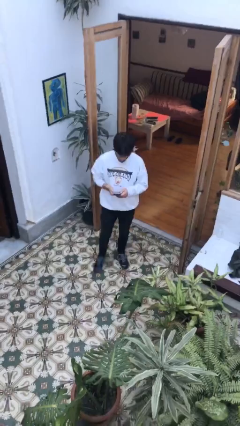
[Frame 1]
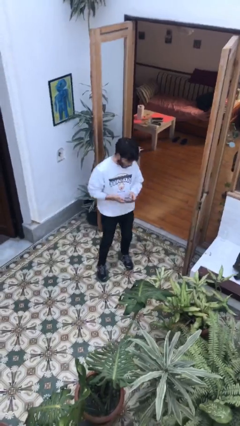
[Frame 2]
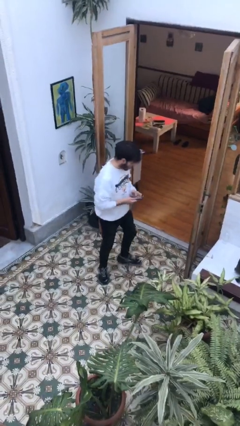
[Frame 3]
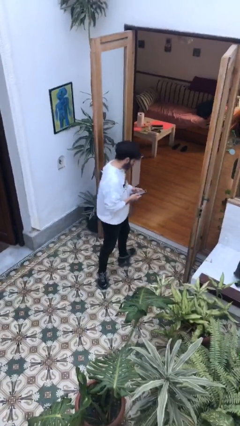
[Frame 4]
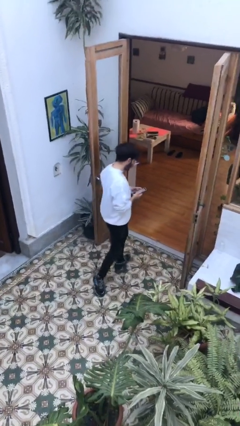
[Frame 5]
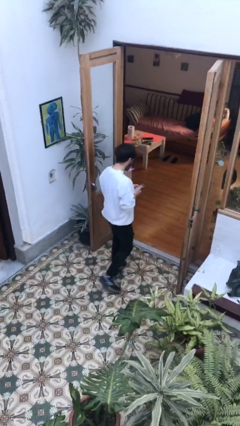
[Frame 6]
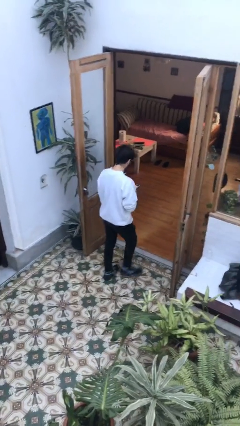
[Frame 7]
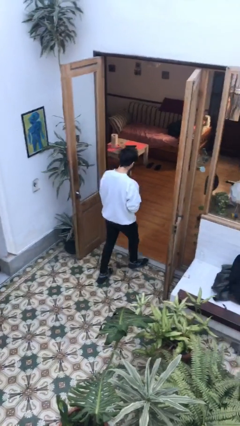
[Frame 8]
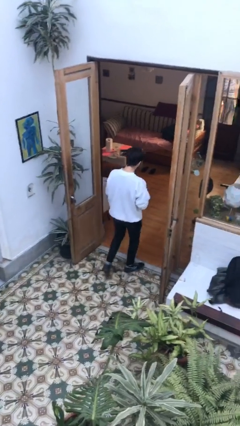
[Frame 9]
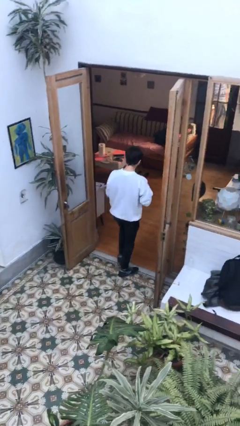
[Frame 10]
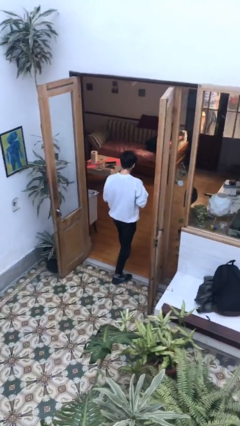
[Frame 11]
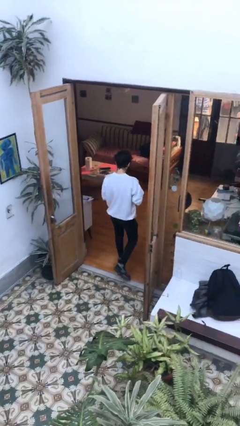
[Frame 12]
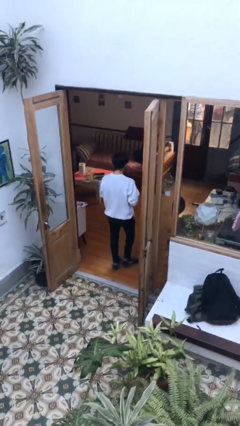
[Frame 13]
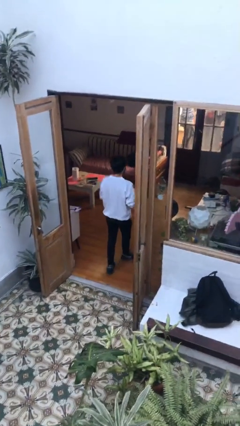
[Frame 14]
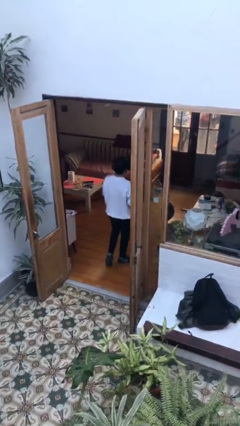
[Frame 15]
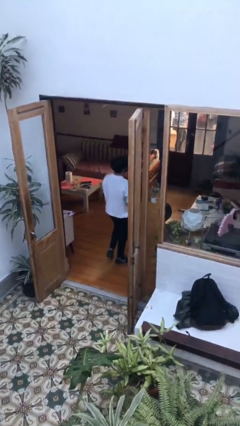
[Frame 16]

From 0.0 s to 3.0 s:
person exits scene through structure

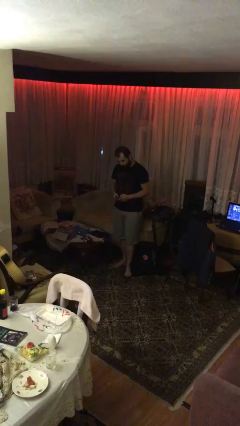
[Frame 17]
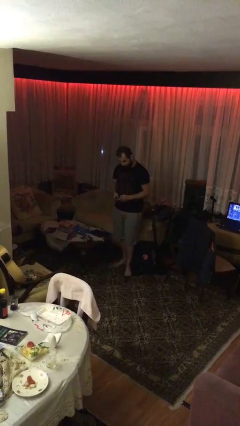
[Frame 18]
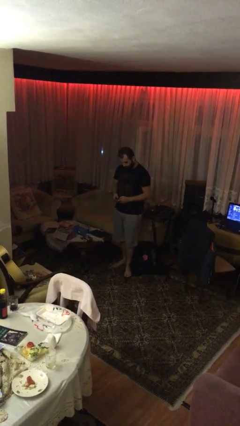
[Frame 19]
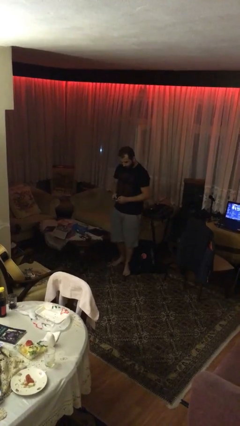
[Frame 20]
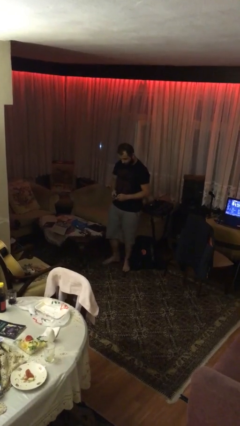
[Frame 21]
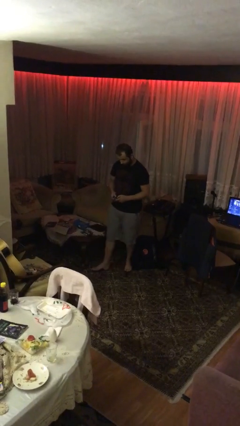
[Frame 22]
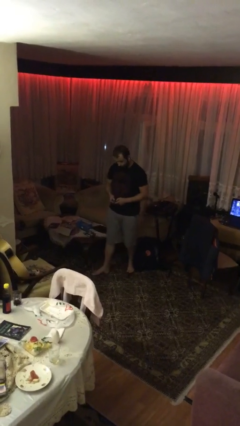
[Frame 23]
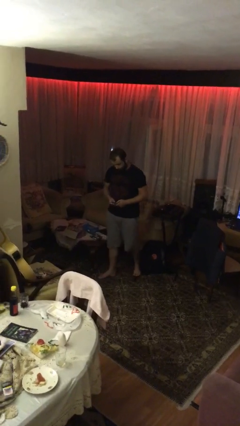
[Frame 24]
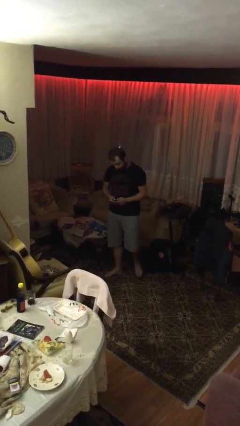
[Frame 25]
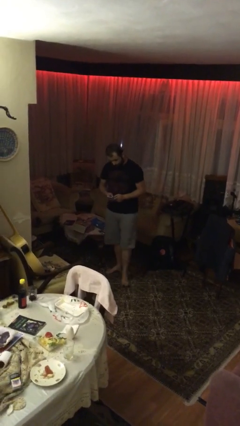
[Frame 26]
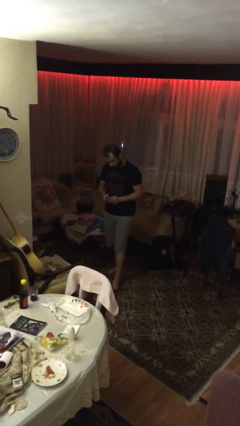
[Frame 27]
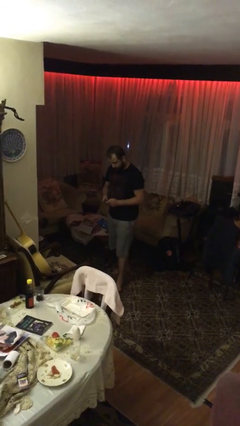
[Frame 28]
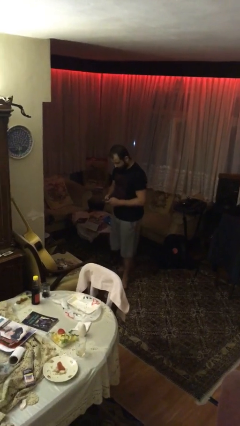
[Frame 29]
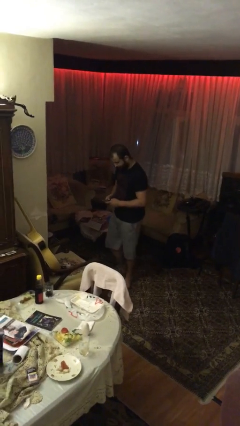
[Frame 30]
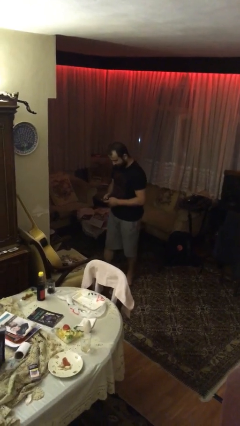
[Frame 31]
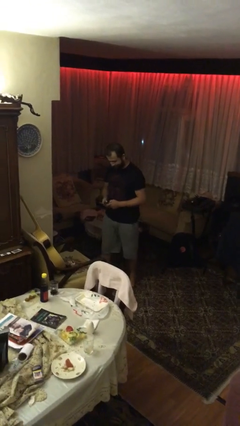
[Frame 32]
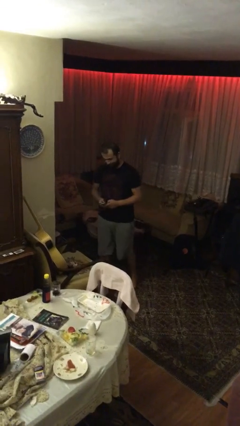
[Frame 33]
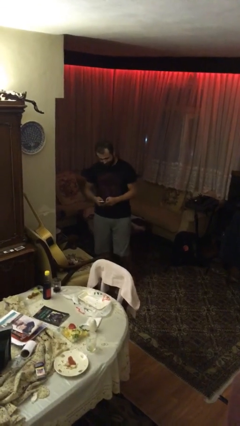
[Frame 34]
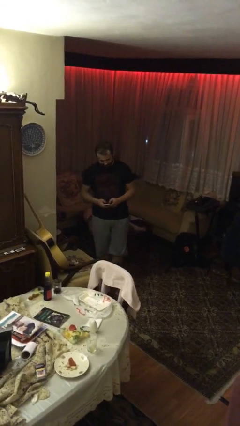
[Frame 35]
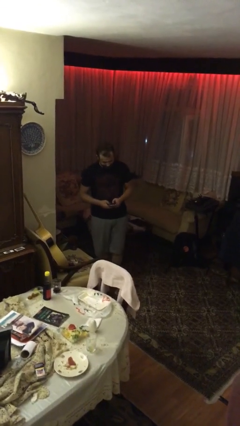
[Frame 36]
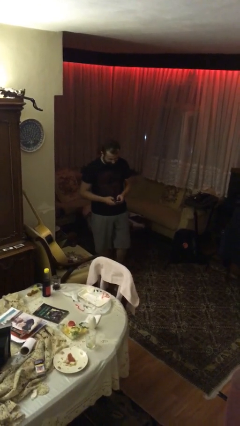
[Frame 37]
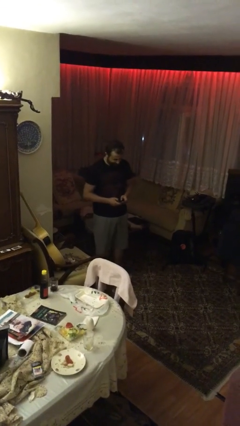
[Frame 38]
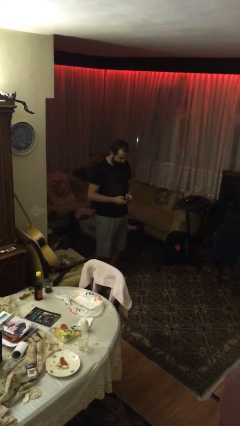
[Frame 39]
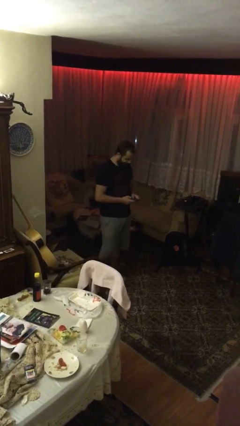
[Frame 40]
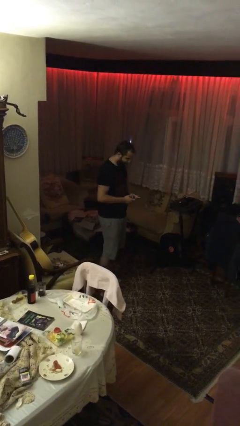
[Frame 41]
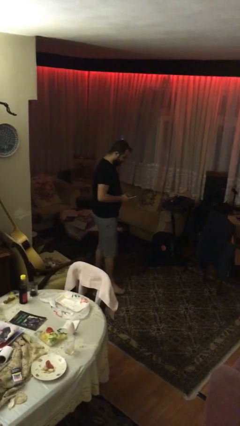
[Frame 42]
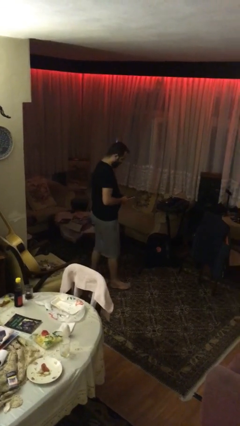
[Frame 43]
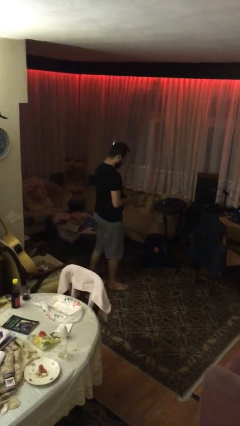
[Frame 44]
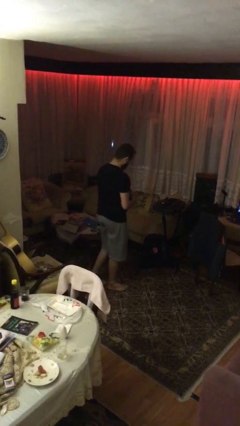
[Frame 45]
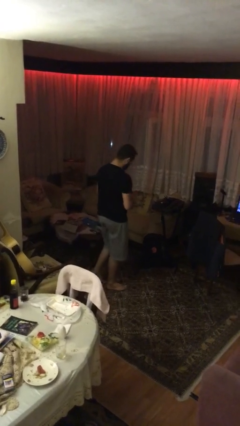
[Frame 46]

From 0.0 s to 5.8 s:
person texts on phone

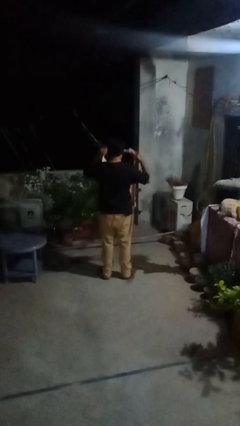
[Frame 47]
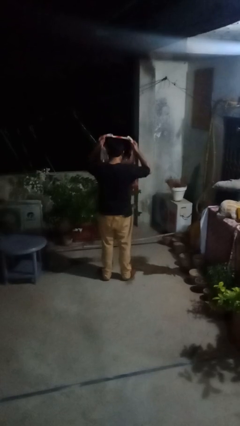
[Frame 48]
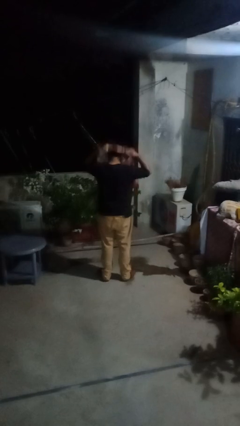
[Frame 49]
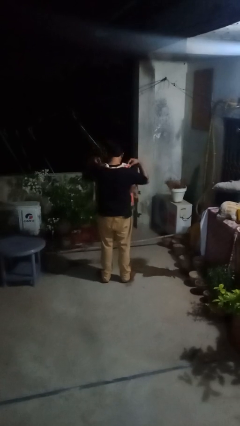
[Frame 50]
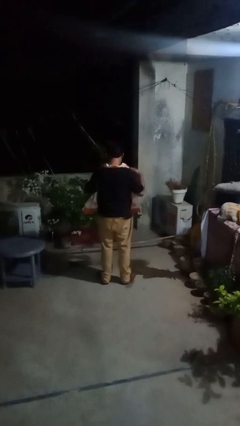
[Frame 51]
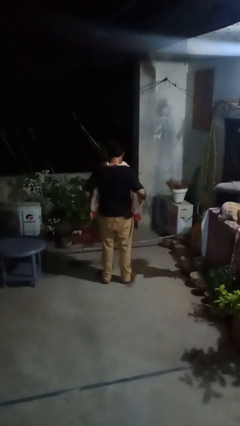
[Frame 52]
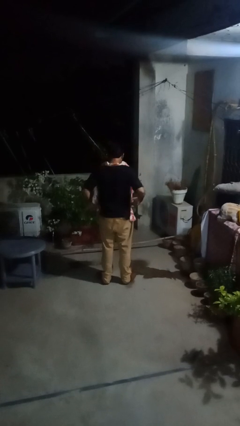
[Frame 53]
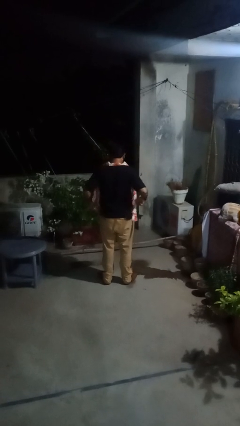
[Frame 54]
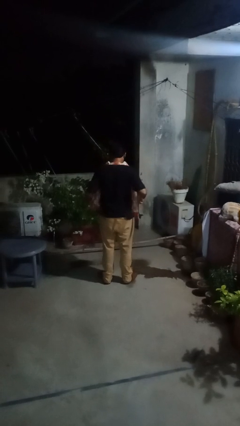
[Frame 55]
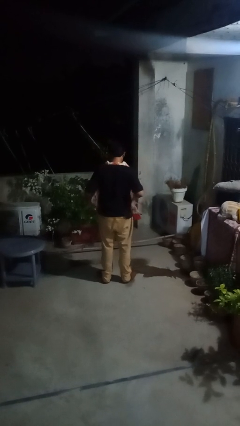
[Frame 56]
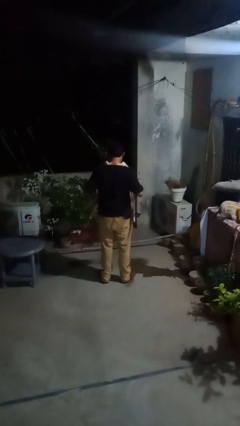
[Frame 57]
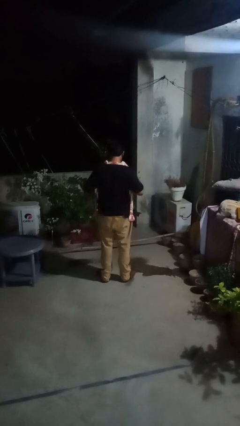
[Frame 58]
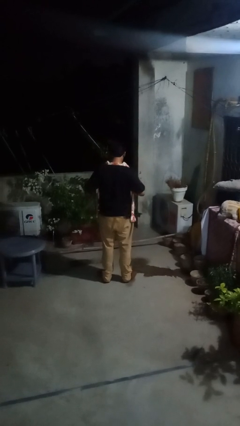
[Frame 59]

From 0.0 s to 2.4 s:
person puts on apron

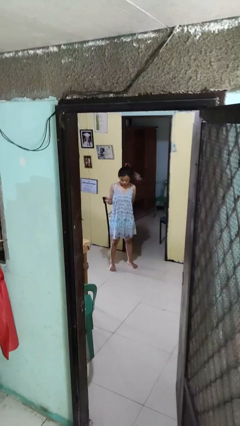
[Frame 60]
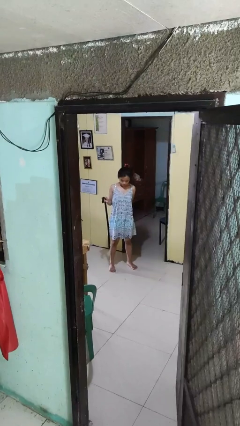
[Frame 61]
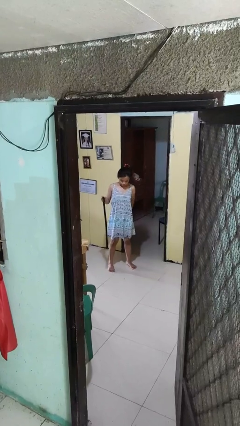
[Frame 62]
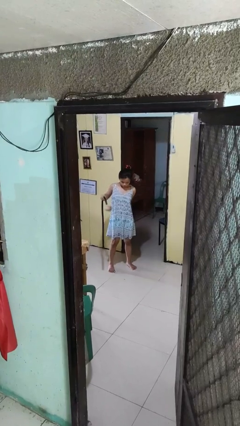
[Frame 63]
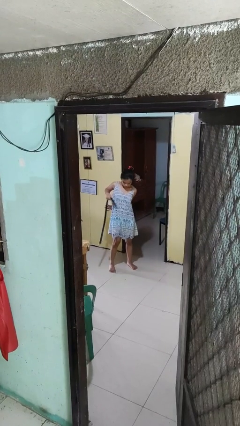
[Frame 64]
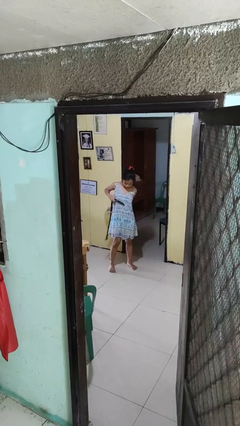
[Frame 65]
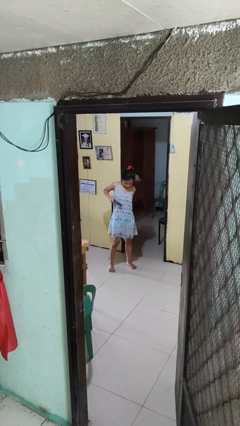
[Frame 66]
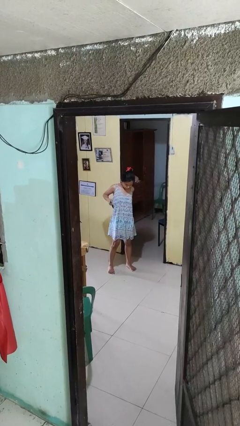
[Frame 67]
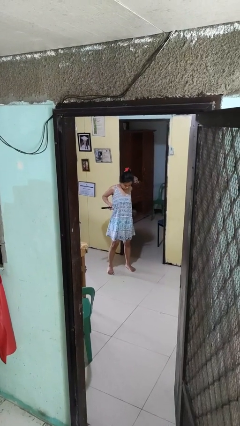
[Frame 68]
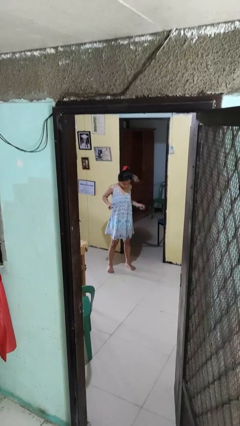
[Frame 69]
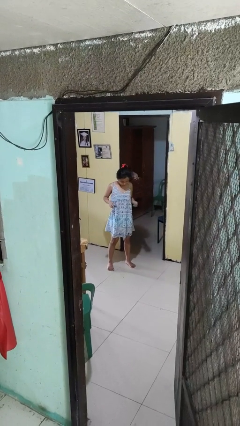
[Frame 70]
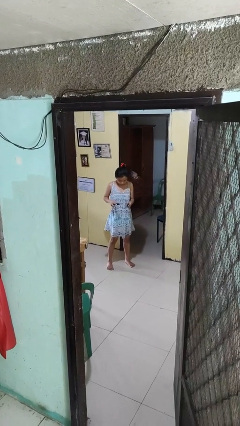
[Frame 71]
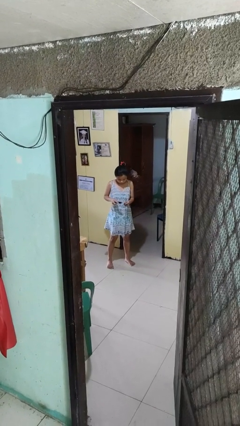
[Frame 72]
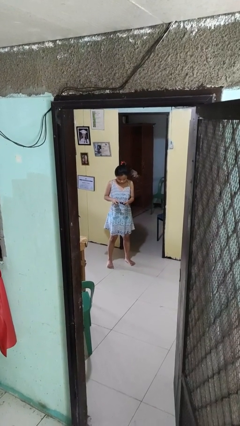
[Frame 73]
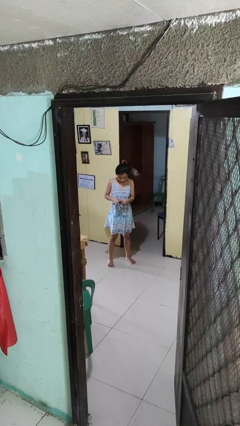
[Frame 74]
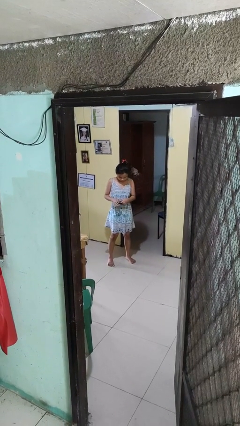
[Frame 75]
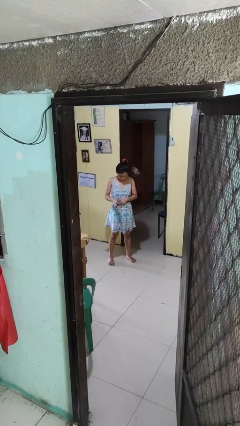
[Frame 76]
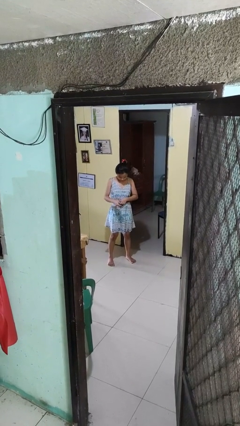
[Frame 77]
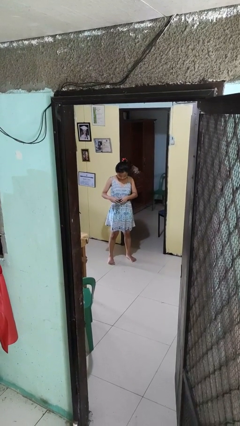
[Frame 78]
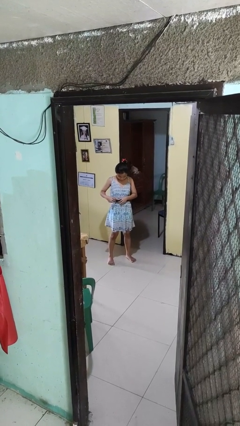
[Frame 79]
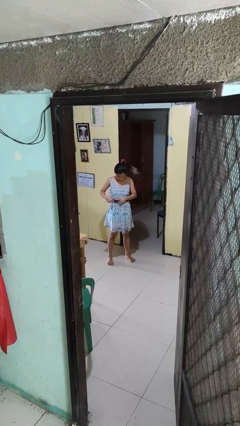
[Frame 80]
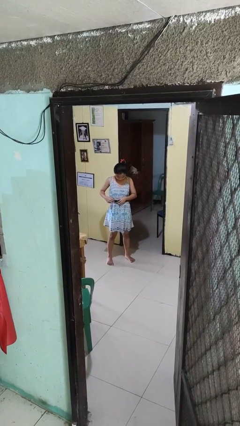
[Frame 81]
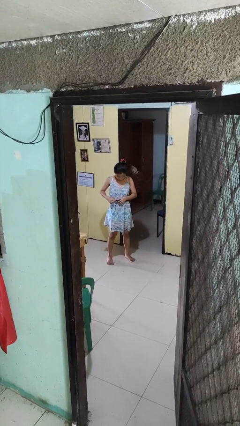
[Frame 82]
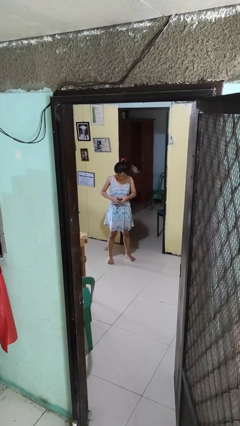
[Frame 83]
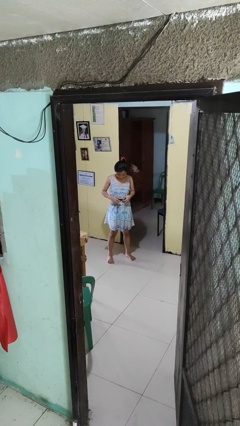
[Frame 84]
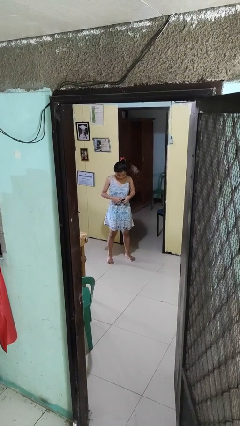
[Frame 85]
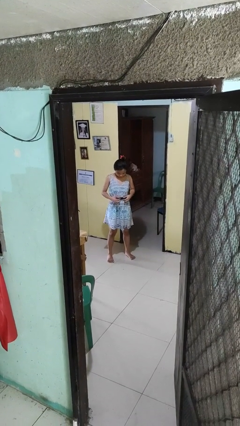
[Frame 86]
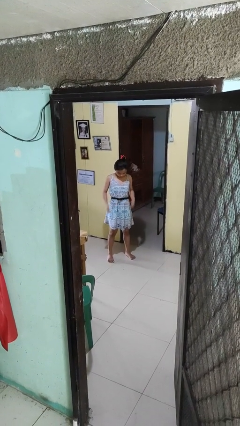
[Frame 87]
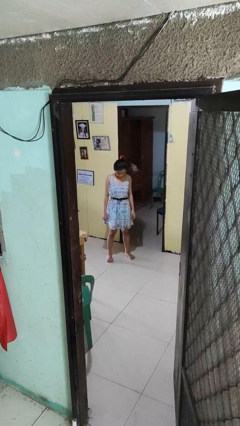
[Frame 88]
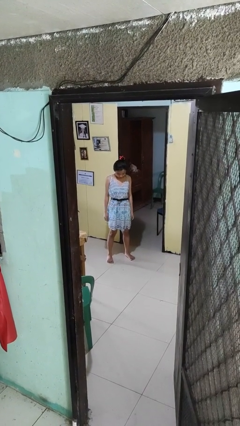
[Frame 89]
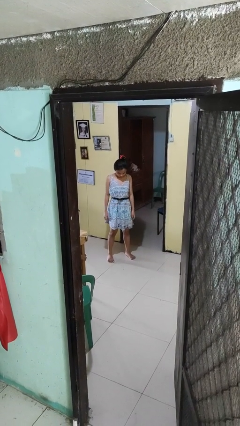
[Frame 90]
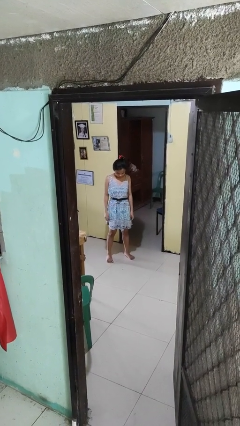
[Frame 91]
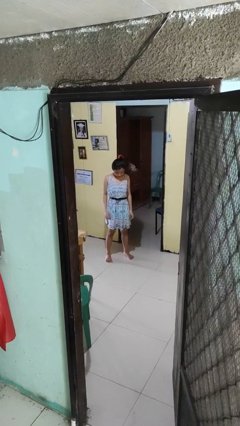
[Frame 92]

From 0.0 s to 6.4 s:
person puts on belt

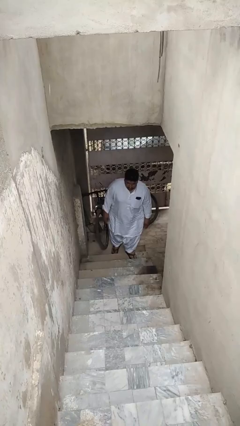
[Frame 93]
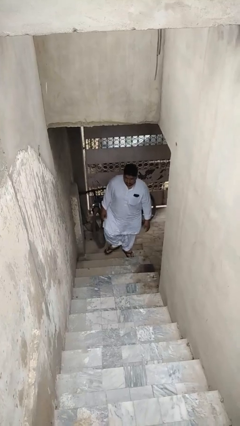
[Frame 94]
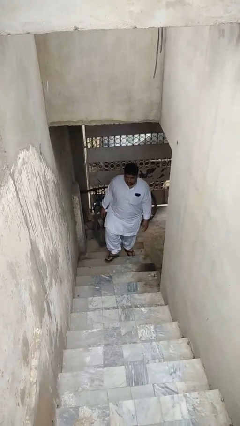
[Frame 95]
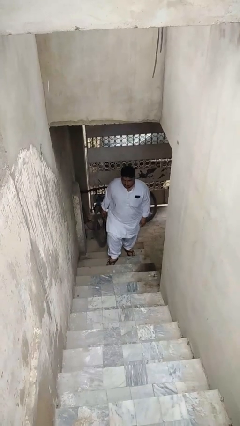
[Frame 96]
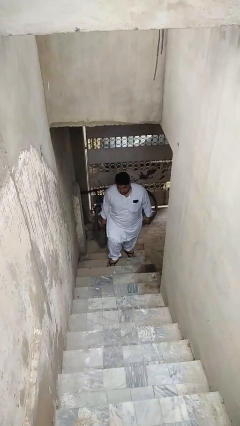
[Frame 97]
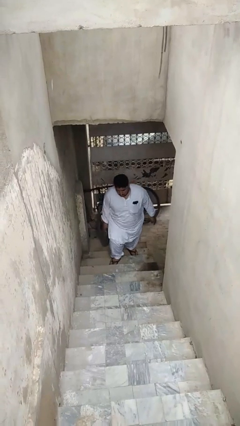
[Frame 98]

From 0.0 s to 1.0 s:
person climbs up stairs
